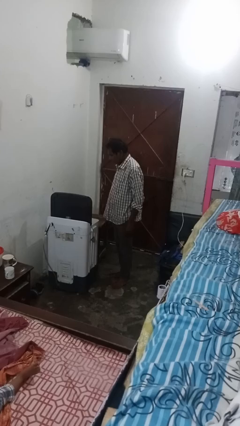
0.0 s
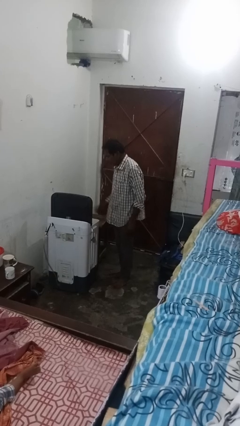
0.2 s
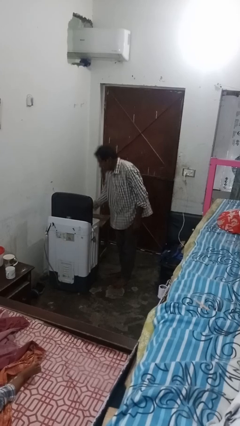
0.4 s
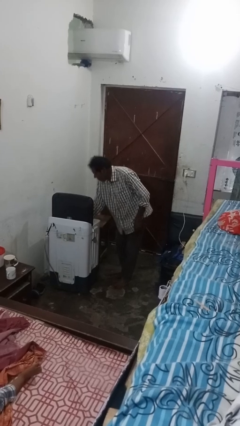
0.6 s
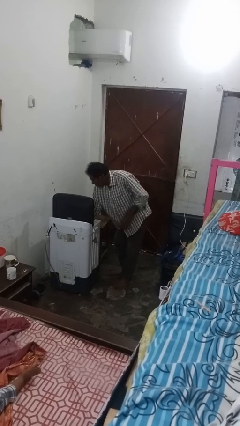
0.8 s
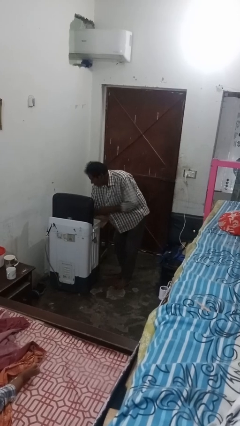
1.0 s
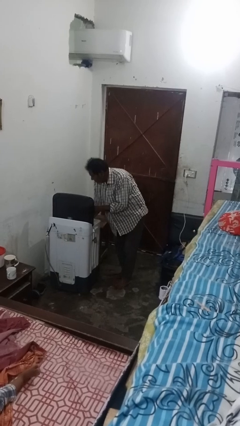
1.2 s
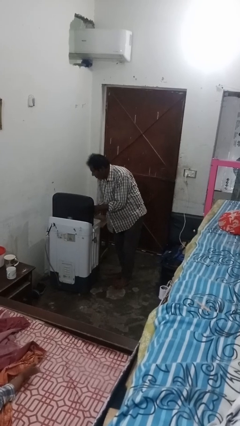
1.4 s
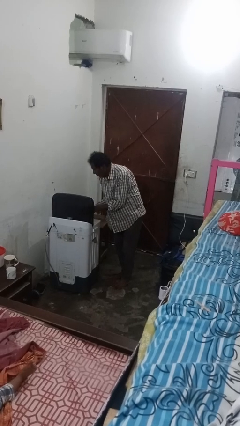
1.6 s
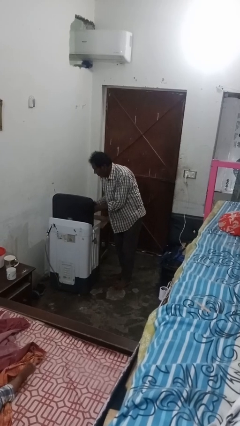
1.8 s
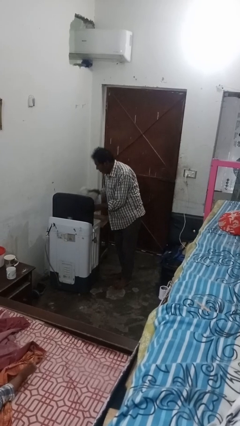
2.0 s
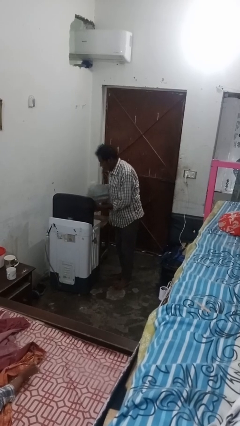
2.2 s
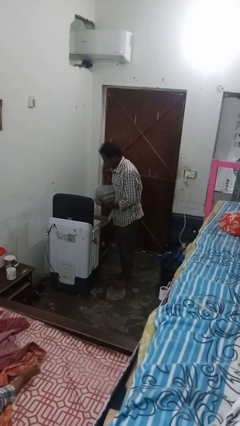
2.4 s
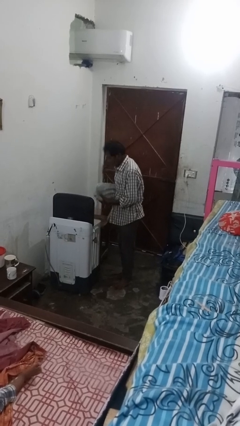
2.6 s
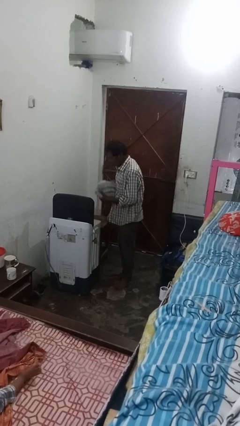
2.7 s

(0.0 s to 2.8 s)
person unloads dryer

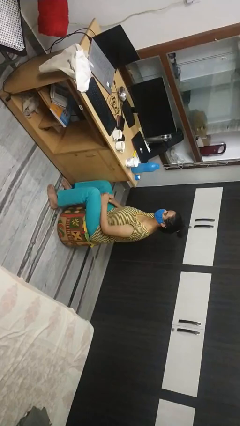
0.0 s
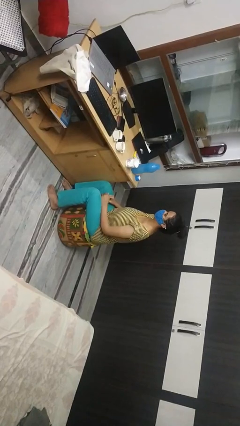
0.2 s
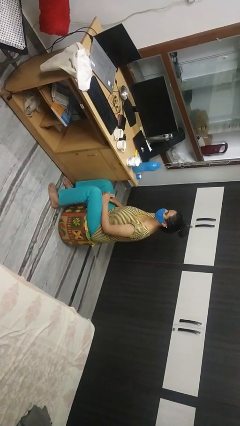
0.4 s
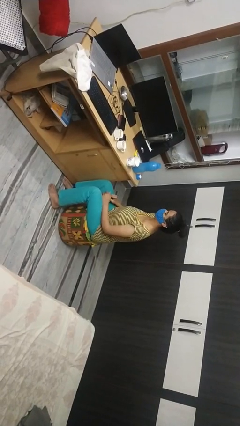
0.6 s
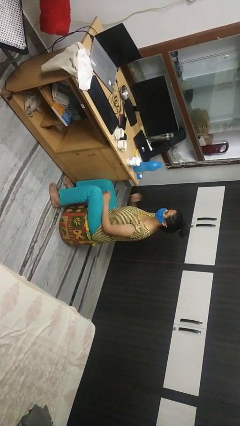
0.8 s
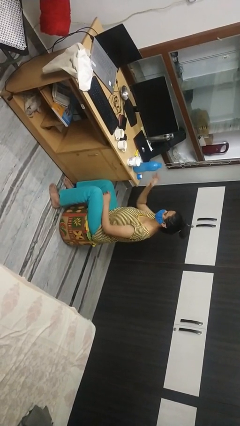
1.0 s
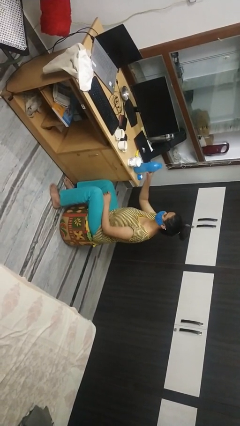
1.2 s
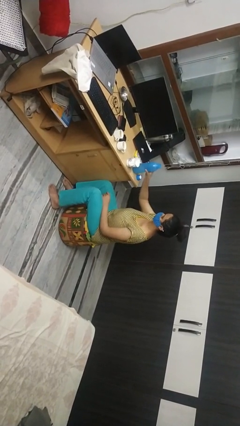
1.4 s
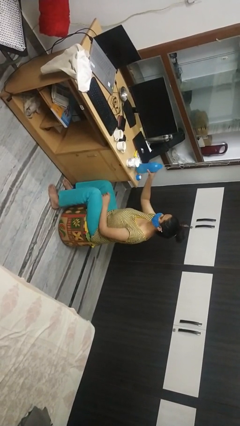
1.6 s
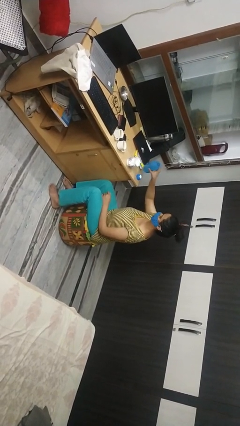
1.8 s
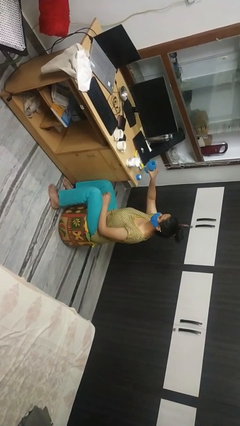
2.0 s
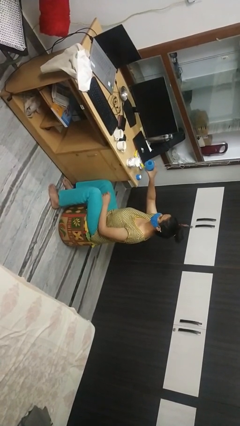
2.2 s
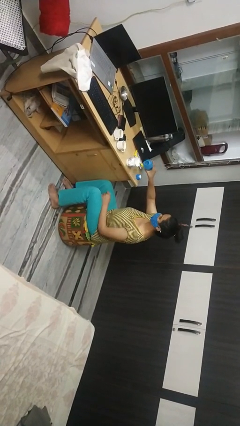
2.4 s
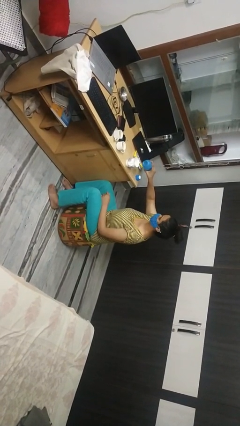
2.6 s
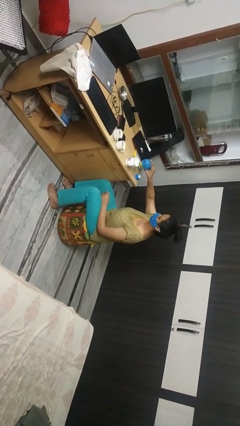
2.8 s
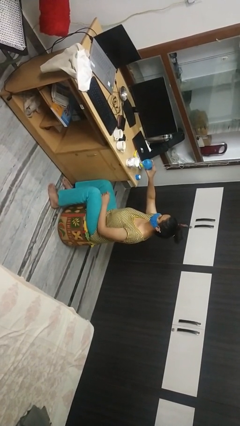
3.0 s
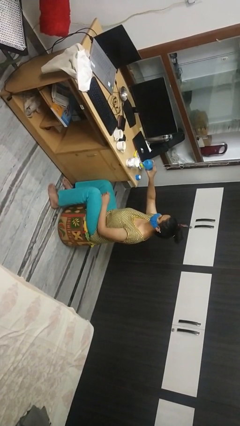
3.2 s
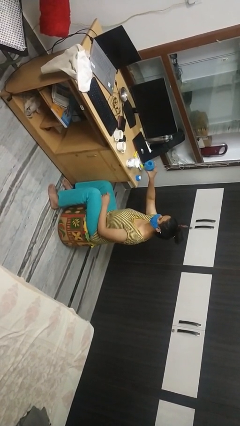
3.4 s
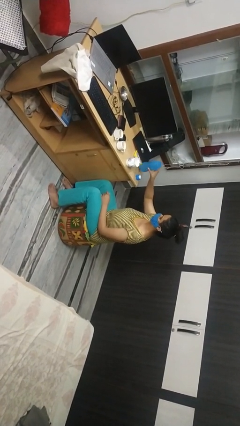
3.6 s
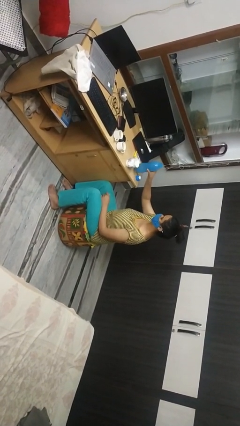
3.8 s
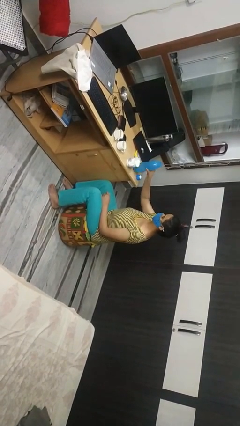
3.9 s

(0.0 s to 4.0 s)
person pours liquid into cup

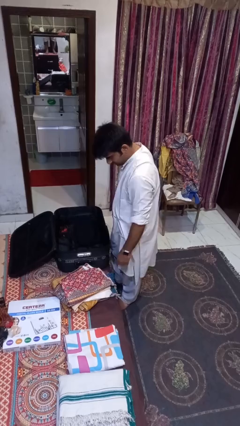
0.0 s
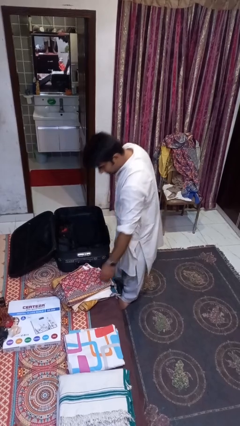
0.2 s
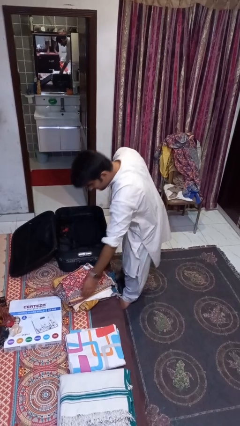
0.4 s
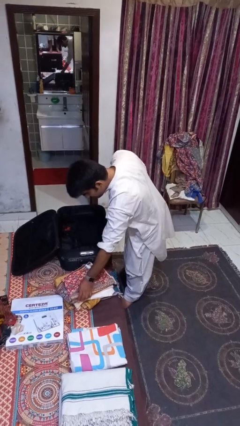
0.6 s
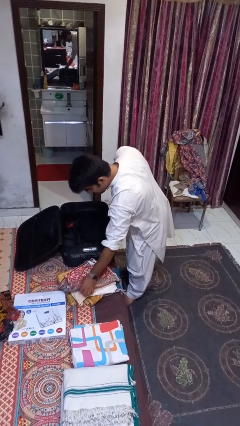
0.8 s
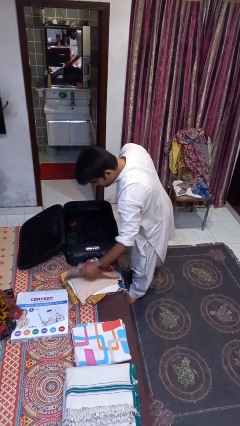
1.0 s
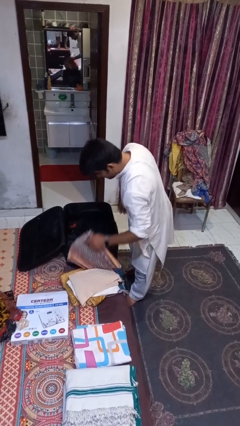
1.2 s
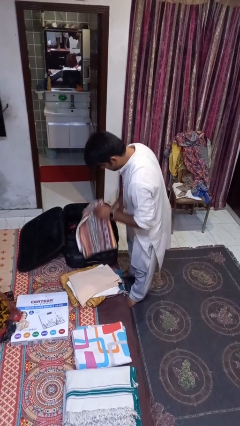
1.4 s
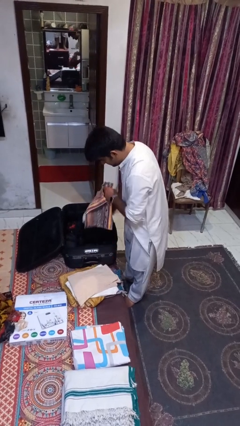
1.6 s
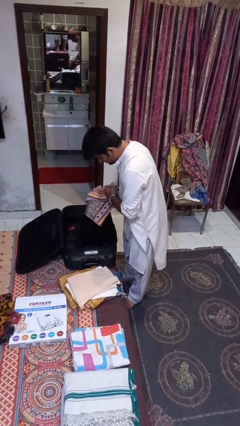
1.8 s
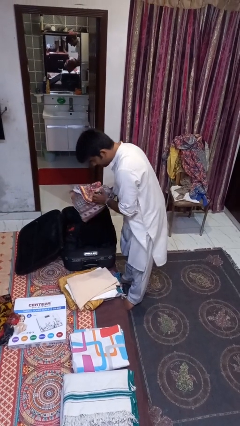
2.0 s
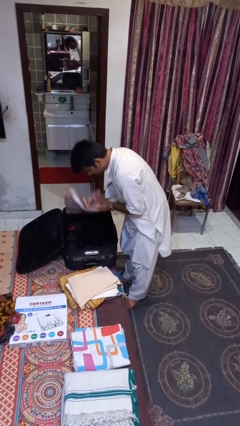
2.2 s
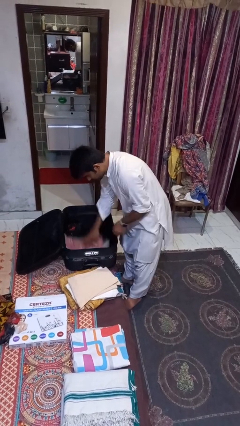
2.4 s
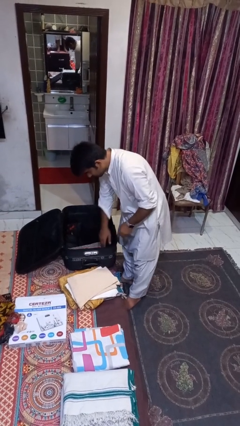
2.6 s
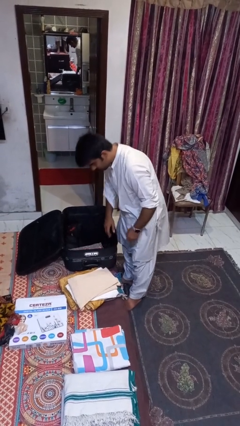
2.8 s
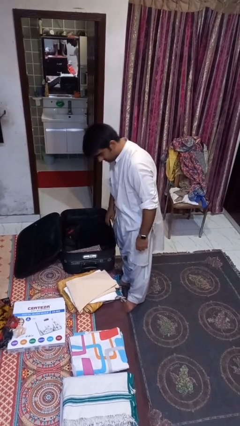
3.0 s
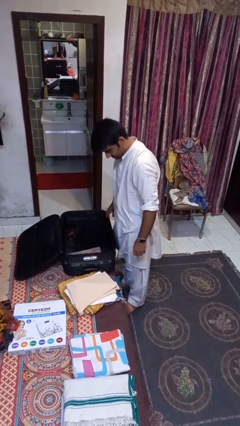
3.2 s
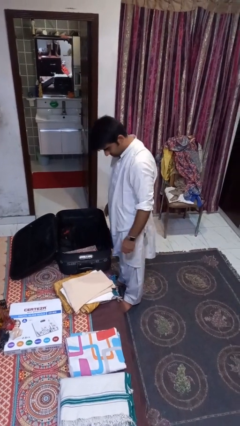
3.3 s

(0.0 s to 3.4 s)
person loads clothes into suitcase

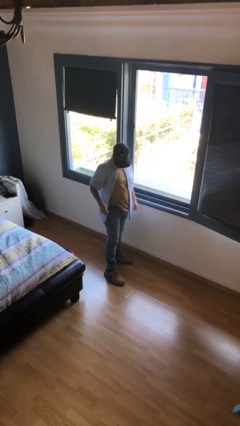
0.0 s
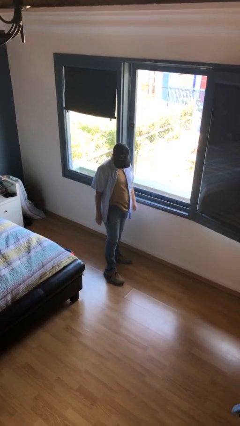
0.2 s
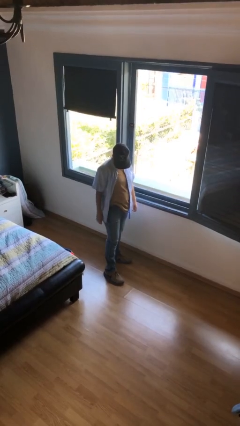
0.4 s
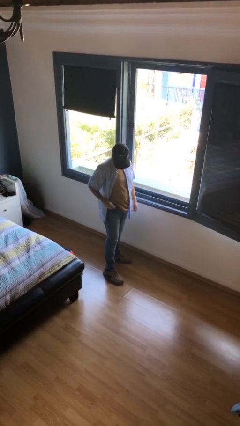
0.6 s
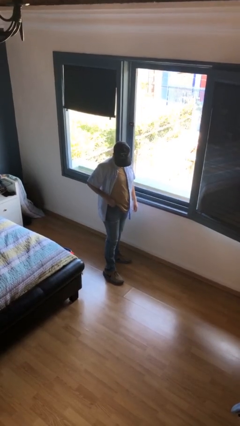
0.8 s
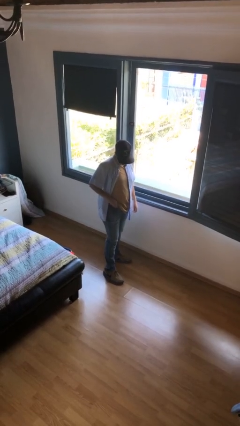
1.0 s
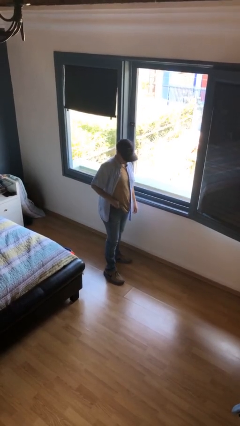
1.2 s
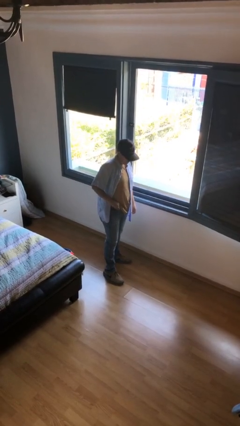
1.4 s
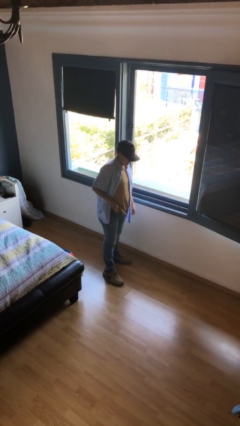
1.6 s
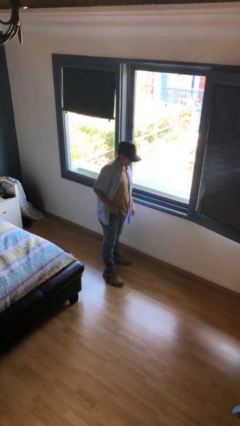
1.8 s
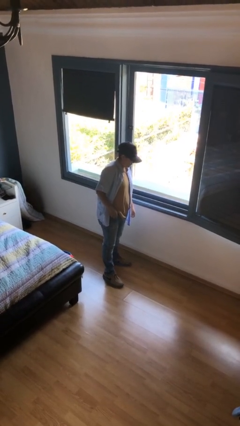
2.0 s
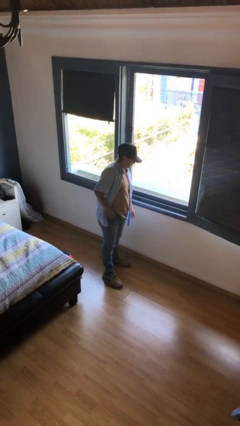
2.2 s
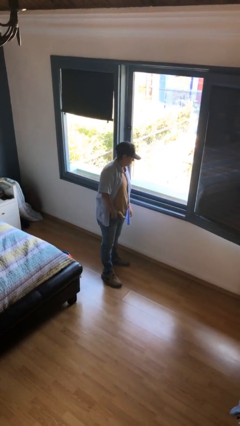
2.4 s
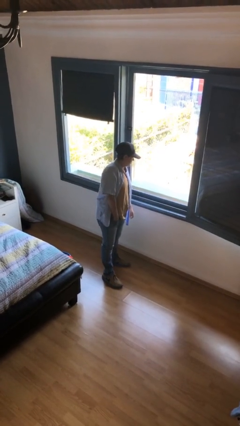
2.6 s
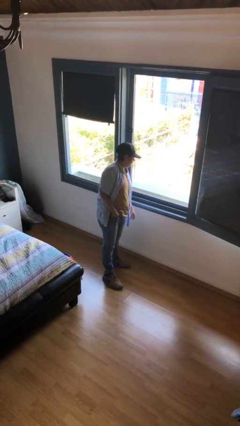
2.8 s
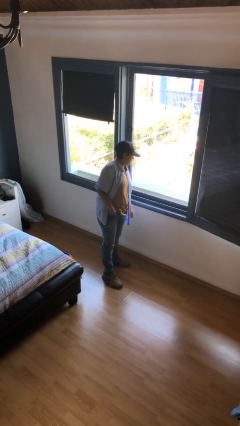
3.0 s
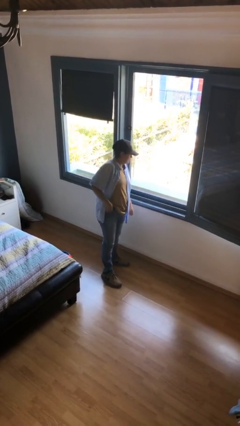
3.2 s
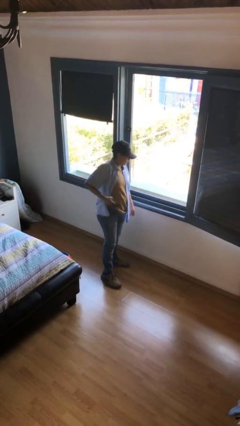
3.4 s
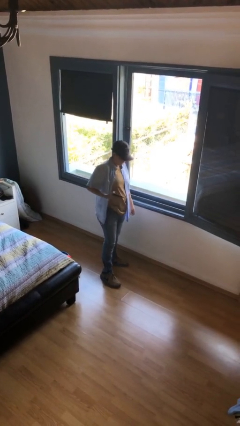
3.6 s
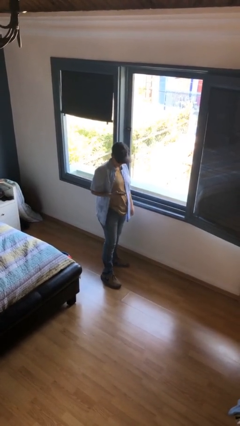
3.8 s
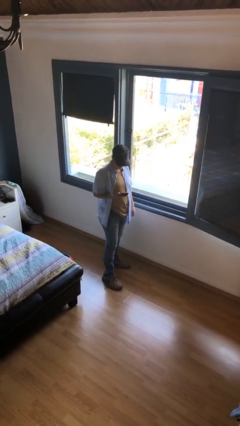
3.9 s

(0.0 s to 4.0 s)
person takes phone from pocket

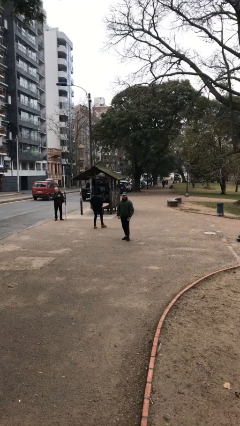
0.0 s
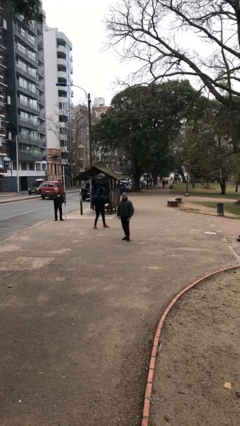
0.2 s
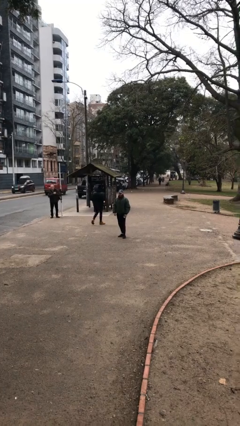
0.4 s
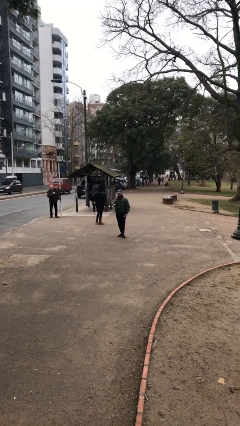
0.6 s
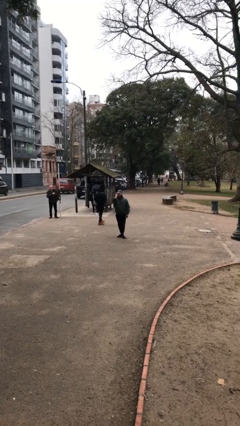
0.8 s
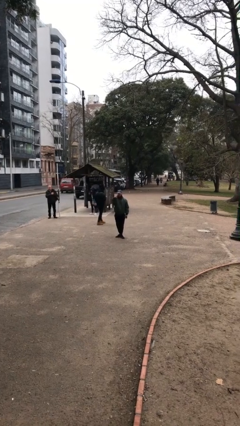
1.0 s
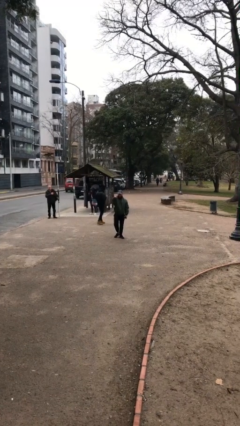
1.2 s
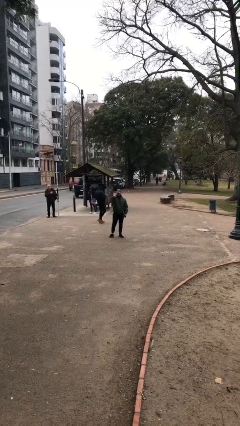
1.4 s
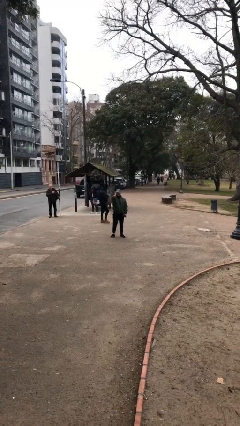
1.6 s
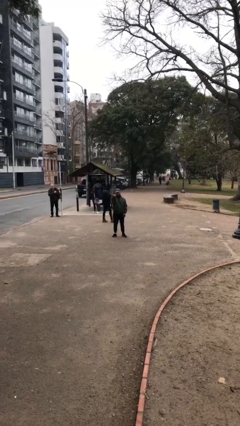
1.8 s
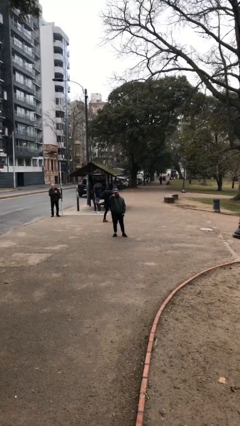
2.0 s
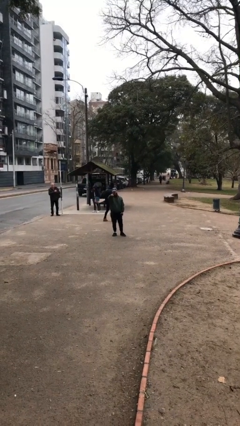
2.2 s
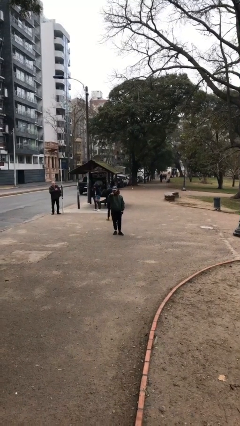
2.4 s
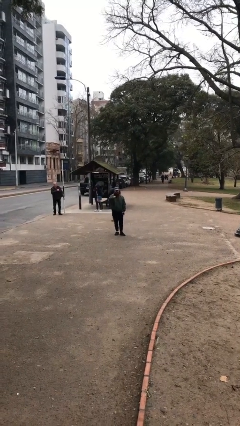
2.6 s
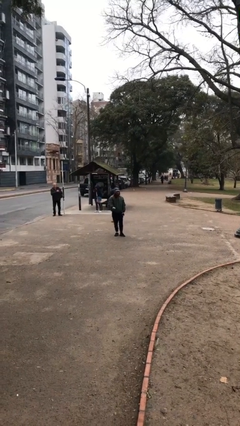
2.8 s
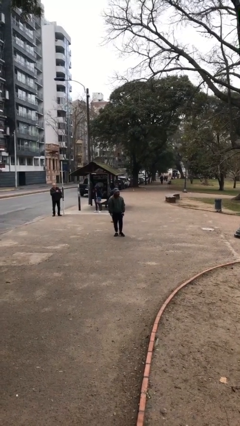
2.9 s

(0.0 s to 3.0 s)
person points at person
